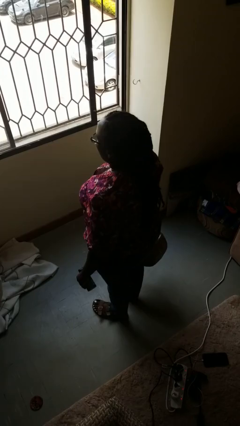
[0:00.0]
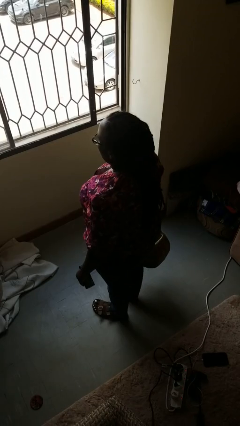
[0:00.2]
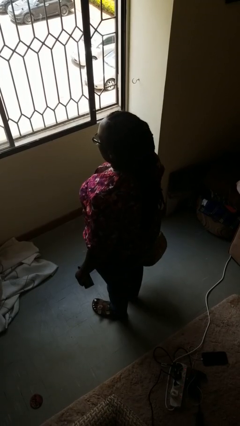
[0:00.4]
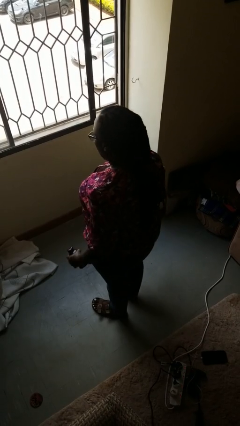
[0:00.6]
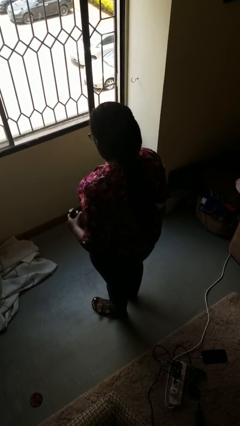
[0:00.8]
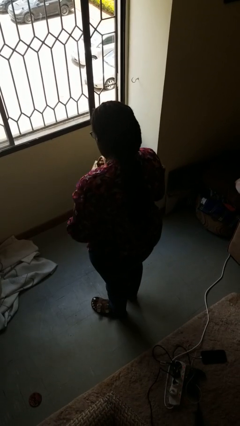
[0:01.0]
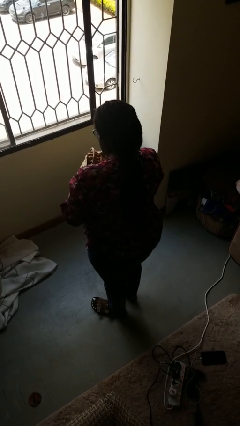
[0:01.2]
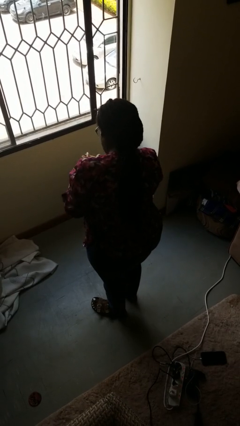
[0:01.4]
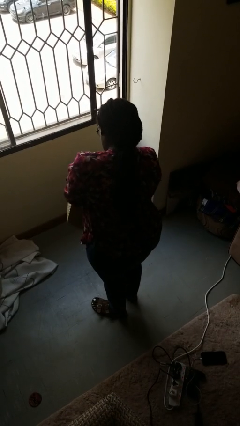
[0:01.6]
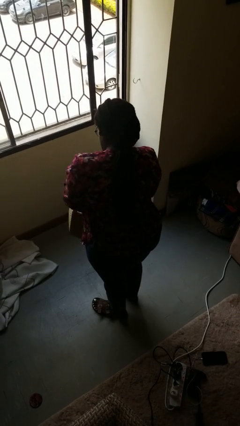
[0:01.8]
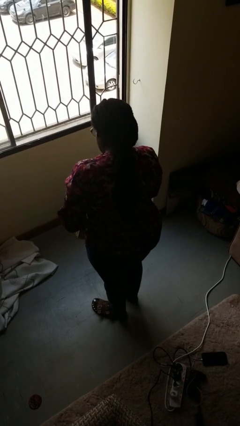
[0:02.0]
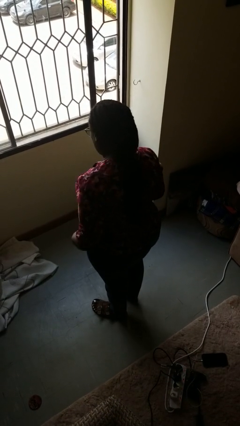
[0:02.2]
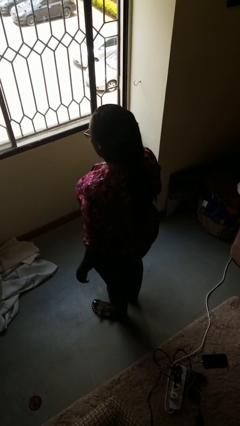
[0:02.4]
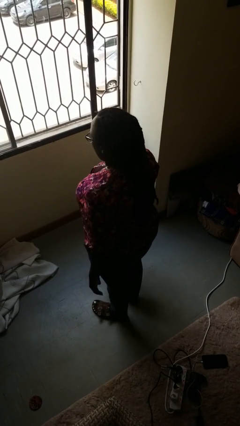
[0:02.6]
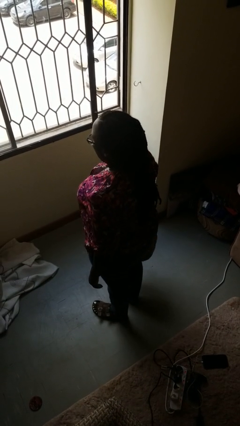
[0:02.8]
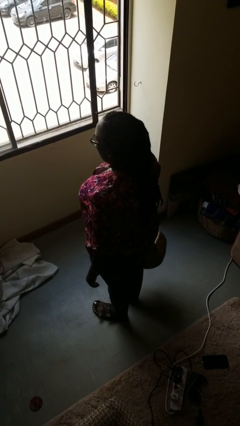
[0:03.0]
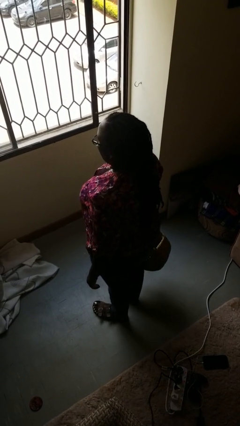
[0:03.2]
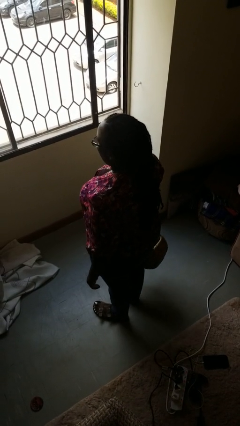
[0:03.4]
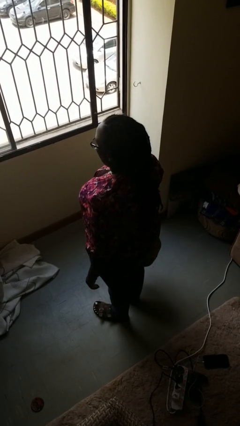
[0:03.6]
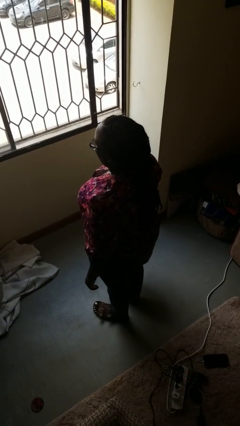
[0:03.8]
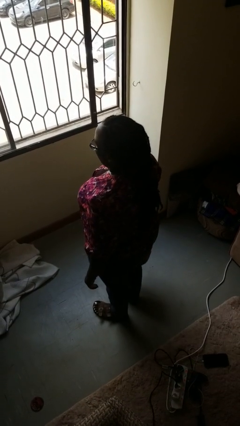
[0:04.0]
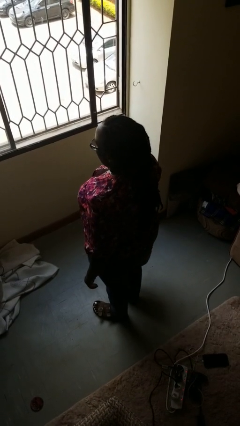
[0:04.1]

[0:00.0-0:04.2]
person puts object into basket

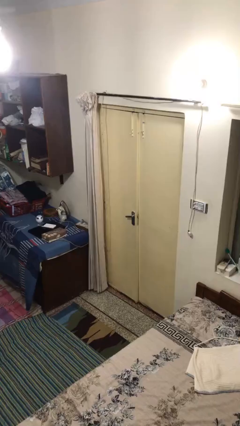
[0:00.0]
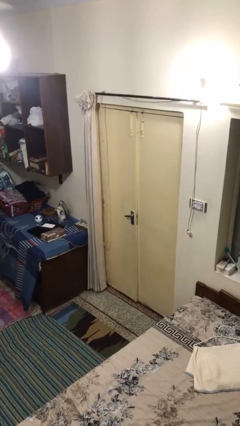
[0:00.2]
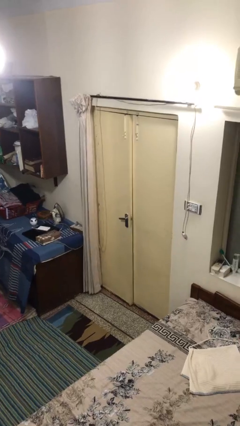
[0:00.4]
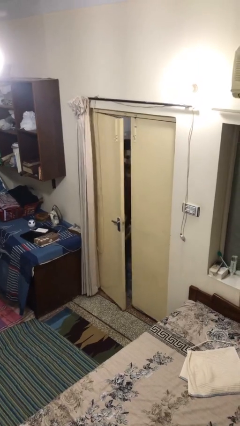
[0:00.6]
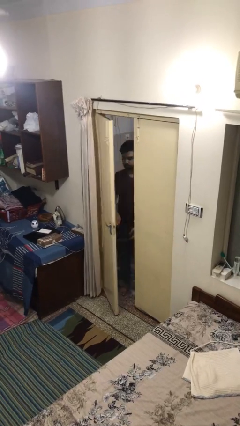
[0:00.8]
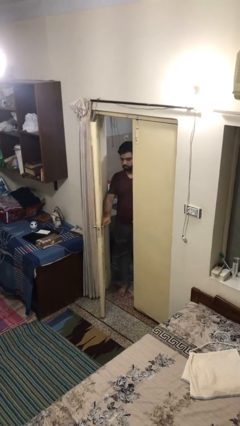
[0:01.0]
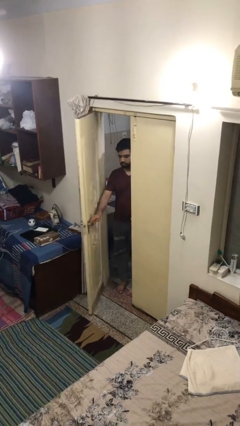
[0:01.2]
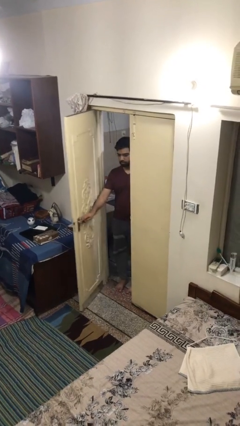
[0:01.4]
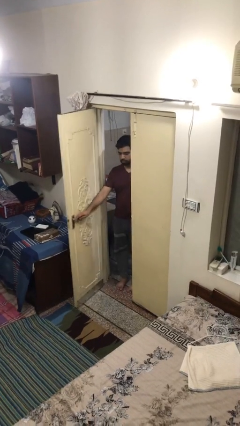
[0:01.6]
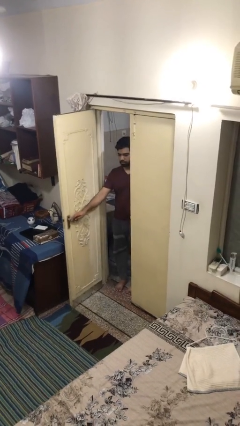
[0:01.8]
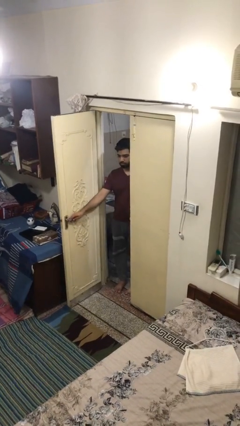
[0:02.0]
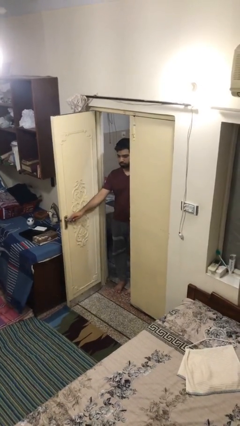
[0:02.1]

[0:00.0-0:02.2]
person opens facility door

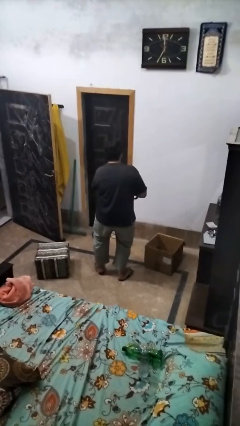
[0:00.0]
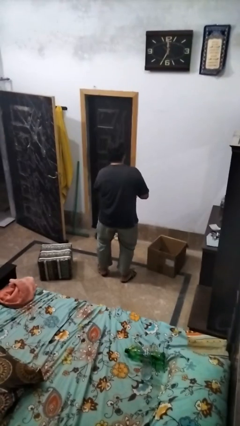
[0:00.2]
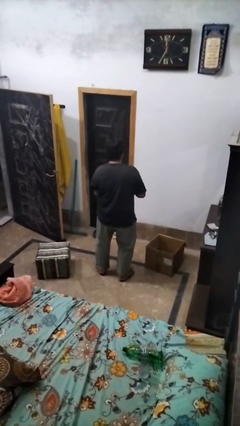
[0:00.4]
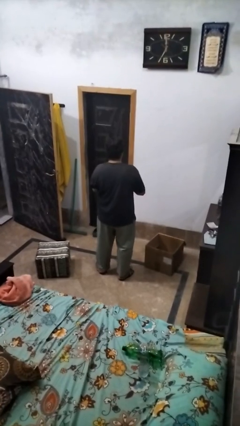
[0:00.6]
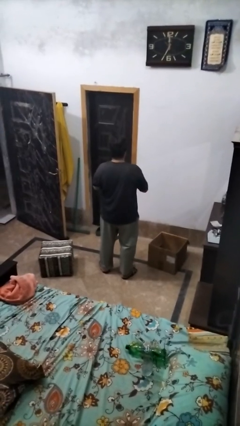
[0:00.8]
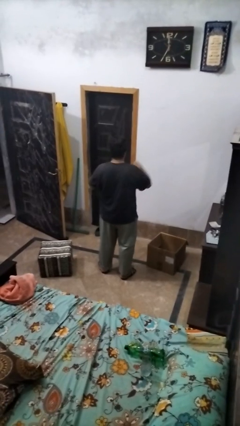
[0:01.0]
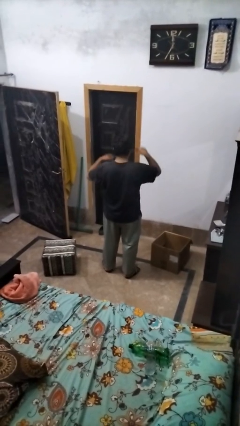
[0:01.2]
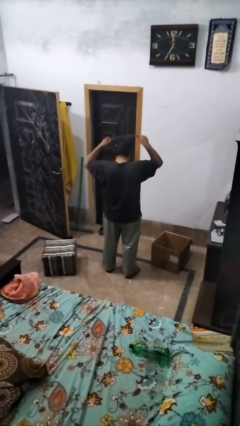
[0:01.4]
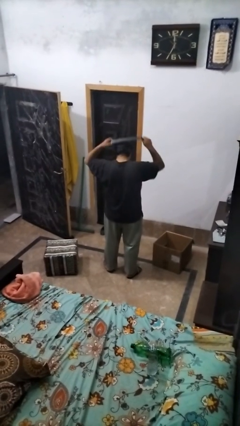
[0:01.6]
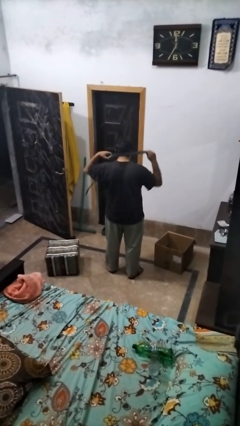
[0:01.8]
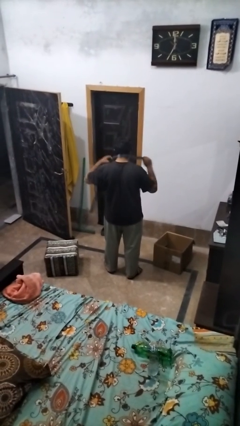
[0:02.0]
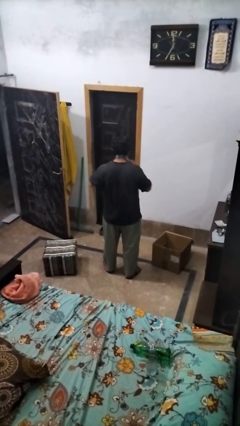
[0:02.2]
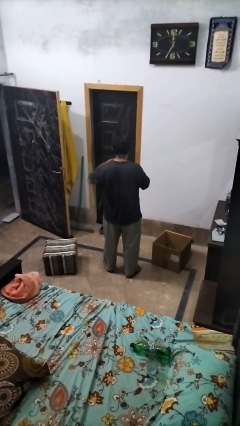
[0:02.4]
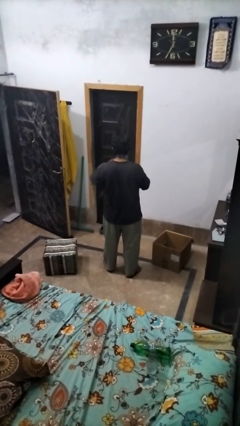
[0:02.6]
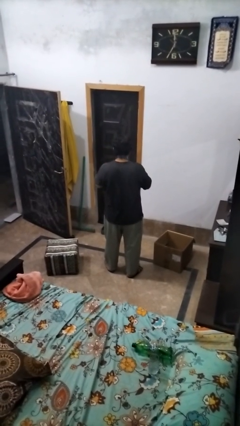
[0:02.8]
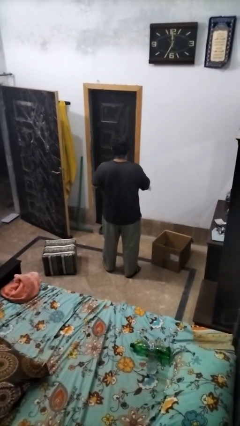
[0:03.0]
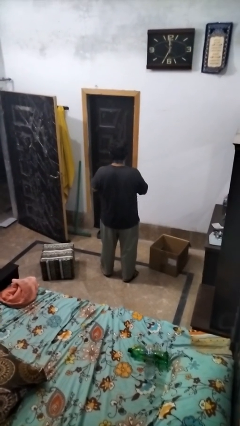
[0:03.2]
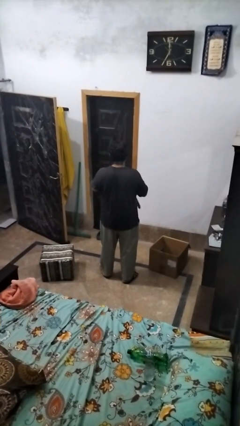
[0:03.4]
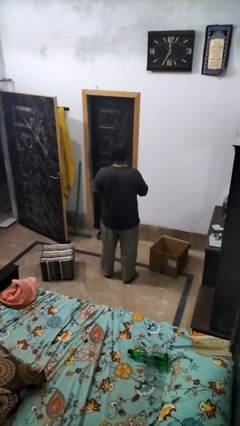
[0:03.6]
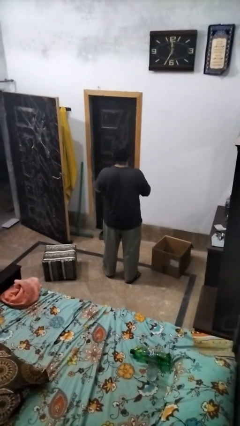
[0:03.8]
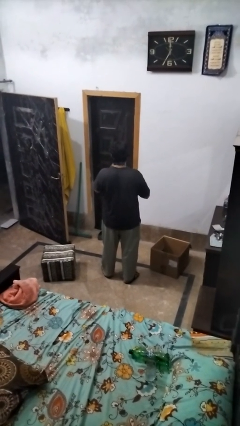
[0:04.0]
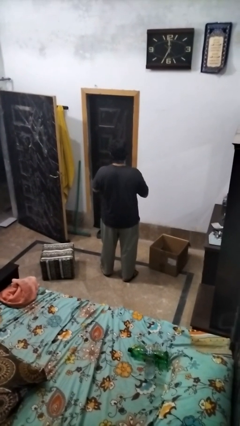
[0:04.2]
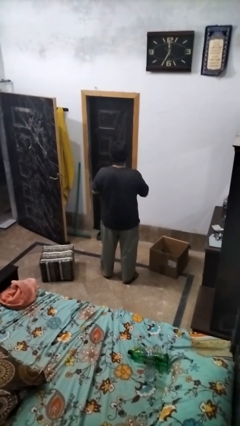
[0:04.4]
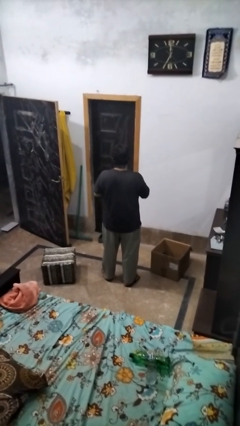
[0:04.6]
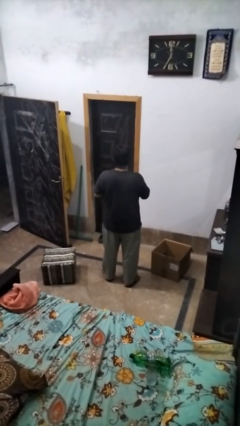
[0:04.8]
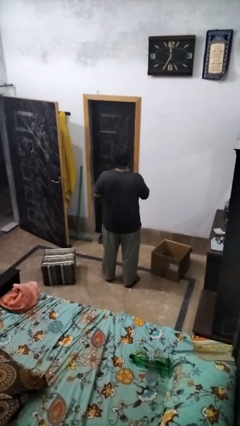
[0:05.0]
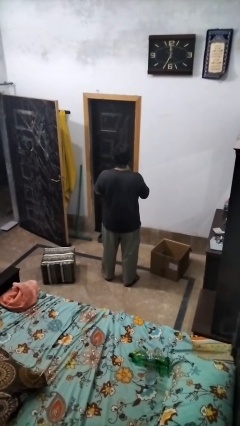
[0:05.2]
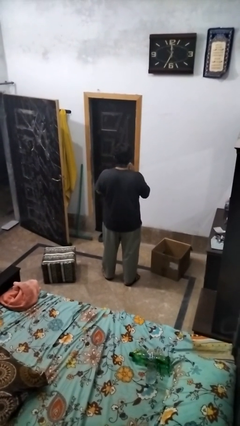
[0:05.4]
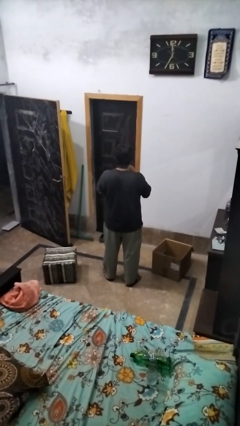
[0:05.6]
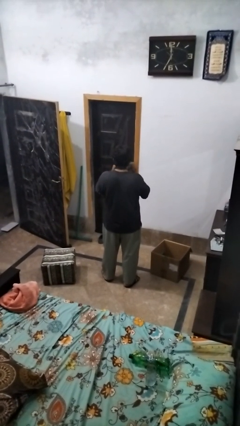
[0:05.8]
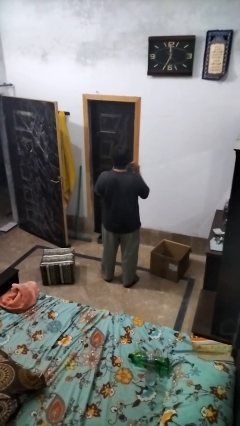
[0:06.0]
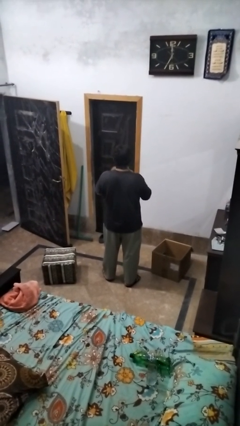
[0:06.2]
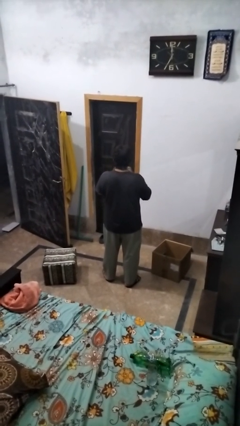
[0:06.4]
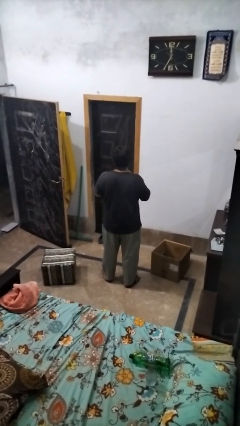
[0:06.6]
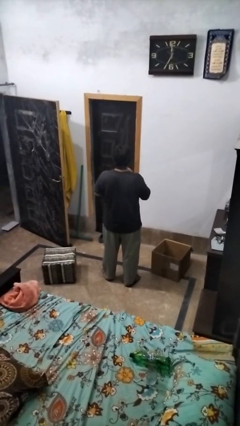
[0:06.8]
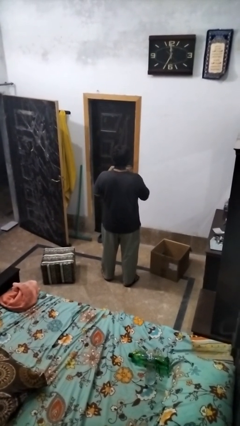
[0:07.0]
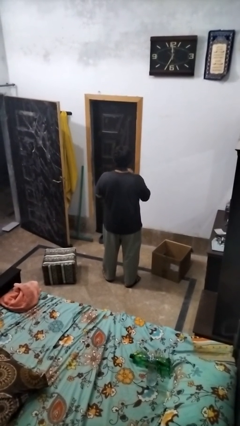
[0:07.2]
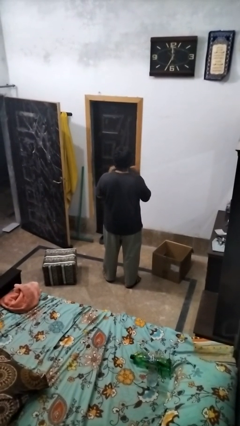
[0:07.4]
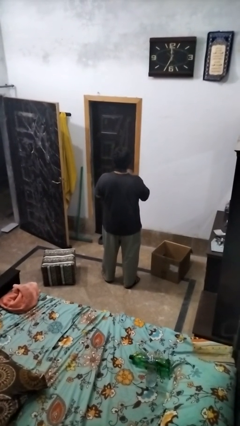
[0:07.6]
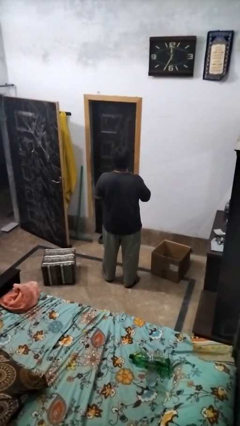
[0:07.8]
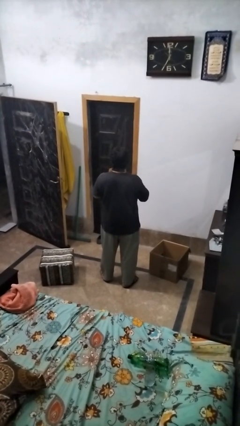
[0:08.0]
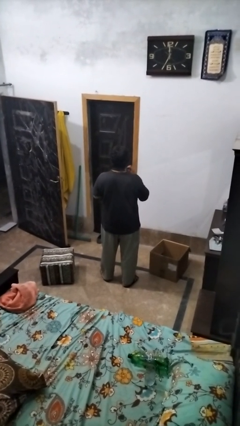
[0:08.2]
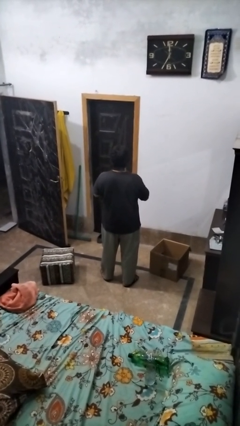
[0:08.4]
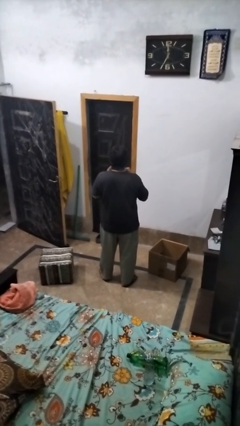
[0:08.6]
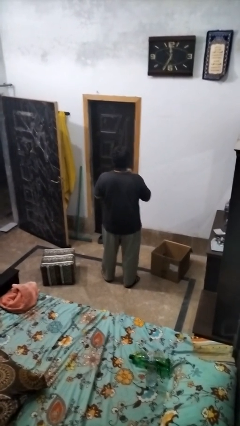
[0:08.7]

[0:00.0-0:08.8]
person puts on necktie

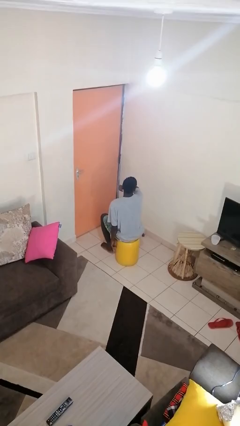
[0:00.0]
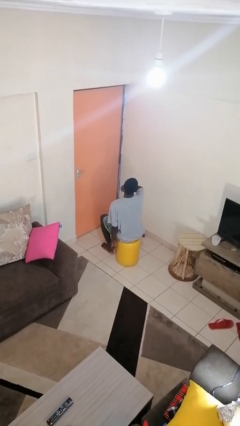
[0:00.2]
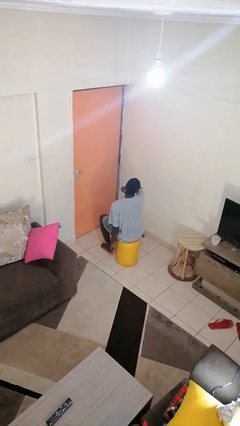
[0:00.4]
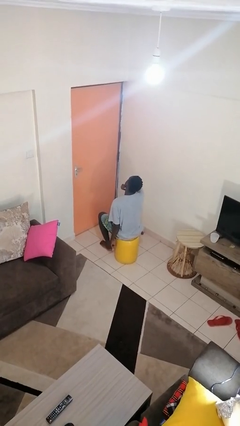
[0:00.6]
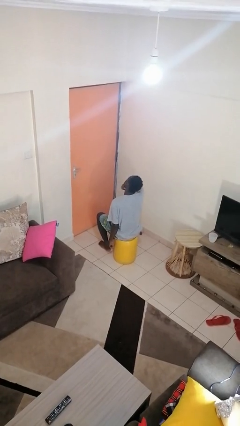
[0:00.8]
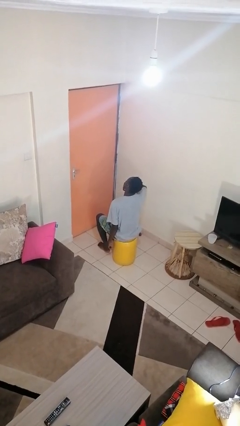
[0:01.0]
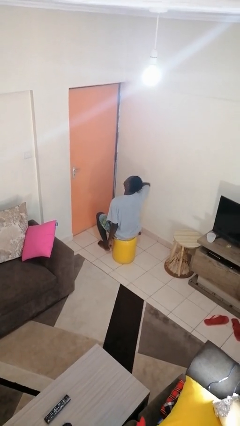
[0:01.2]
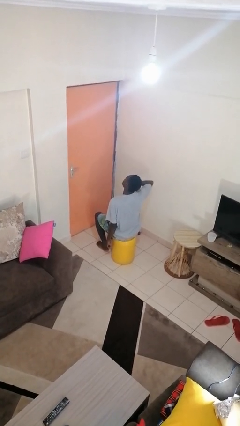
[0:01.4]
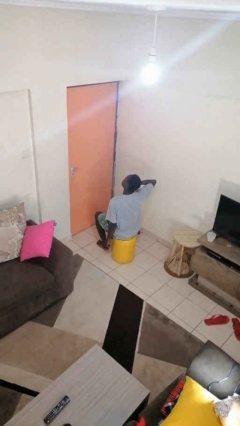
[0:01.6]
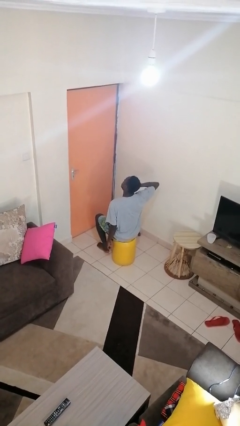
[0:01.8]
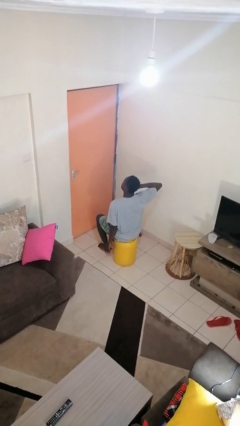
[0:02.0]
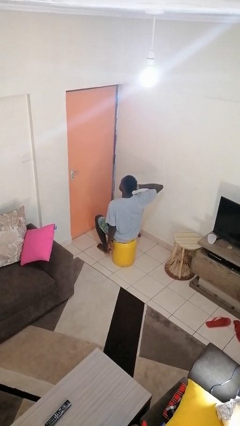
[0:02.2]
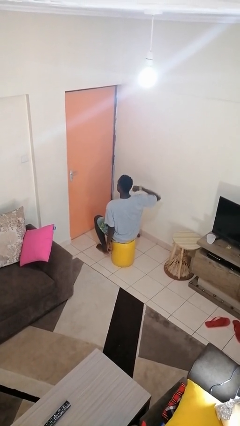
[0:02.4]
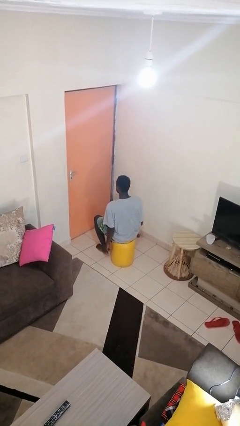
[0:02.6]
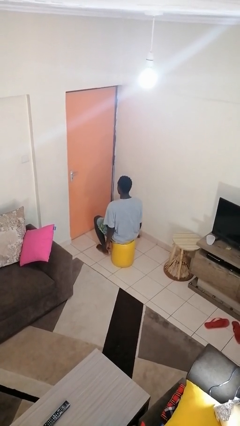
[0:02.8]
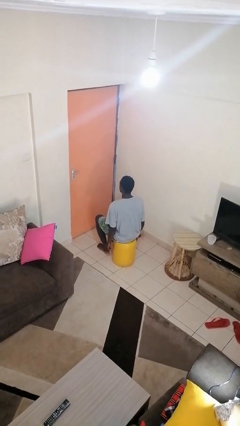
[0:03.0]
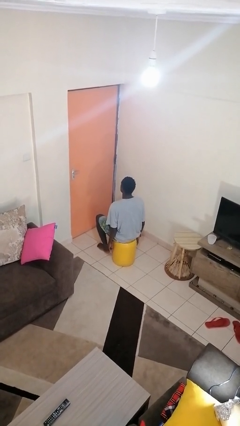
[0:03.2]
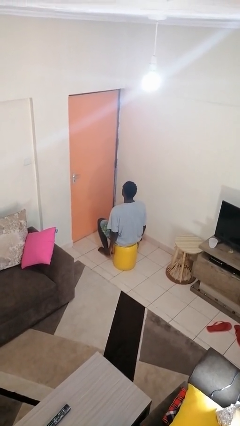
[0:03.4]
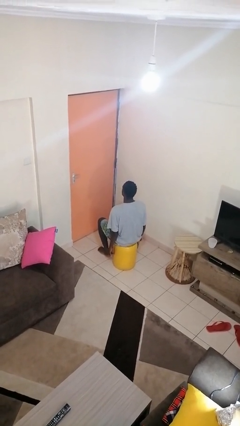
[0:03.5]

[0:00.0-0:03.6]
person gestures cut
